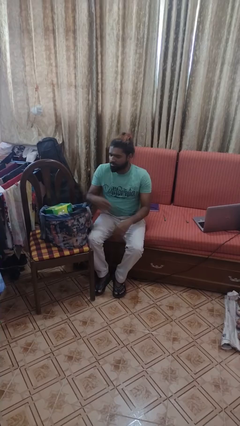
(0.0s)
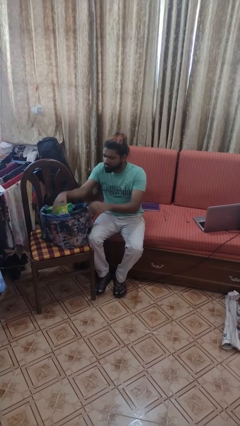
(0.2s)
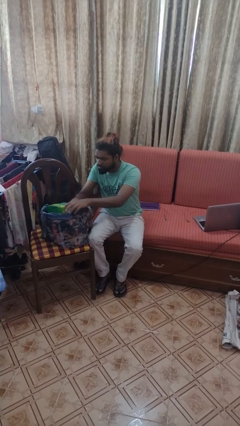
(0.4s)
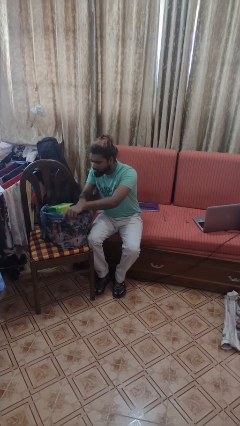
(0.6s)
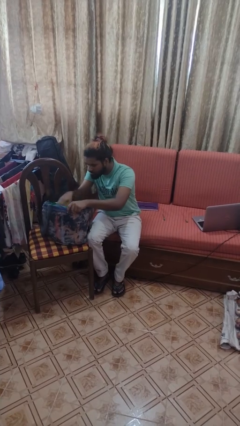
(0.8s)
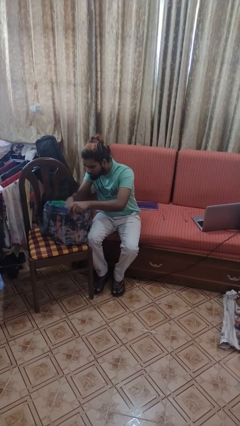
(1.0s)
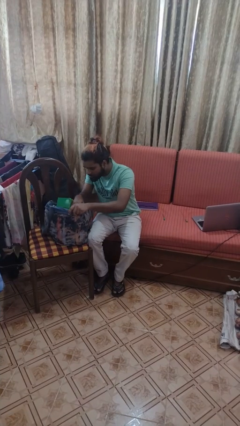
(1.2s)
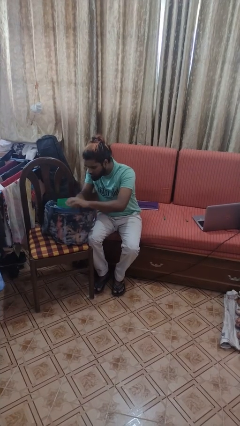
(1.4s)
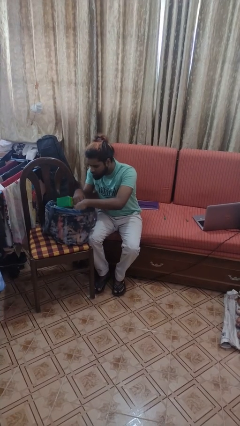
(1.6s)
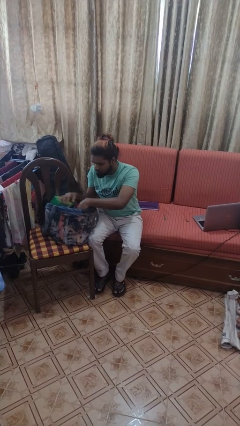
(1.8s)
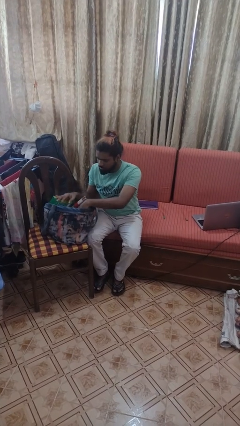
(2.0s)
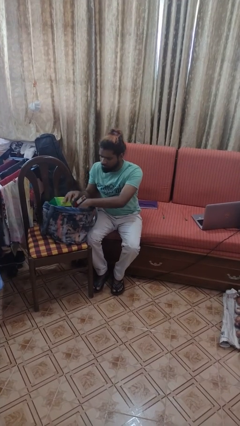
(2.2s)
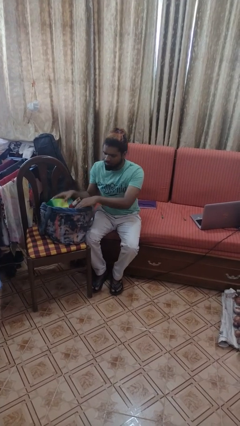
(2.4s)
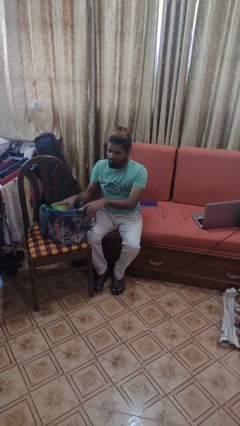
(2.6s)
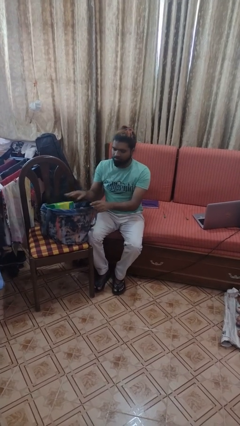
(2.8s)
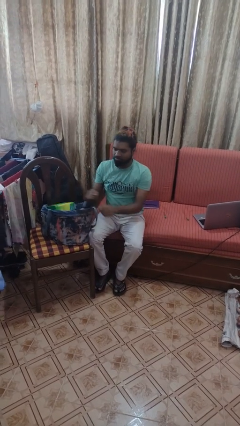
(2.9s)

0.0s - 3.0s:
person searches in bag

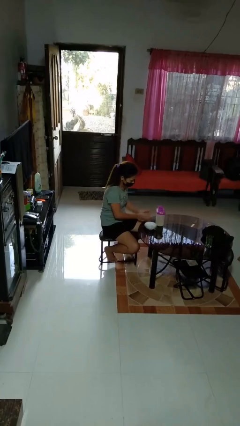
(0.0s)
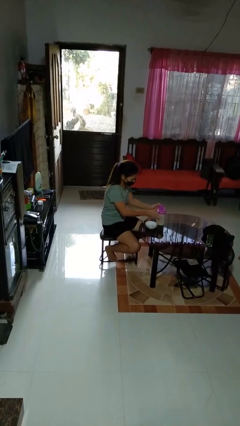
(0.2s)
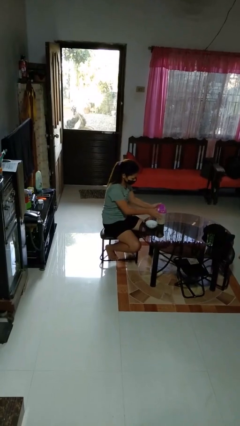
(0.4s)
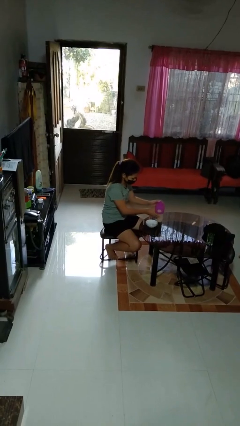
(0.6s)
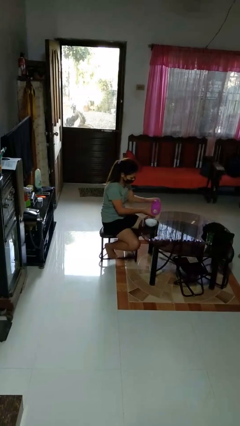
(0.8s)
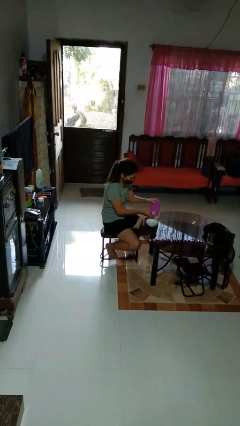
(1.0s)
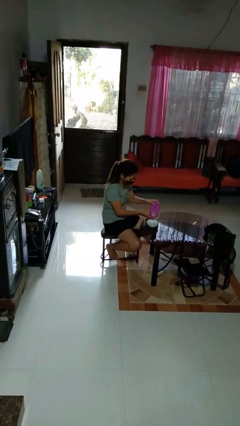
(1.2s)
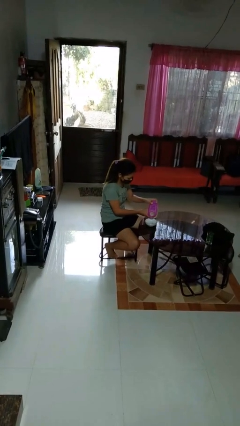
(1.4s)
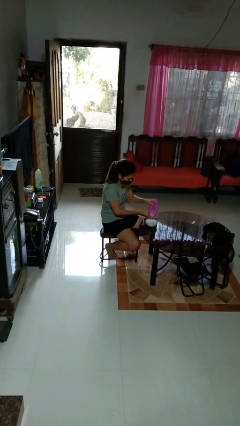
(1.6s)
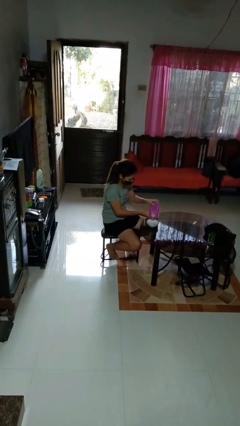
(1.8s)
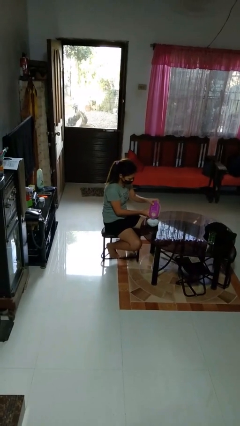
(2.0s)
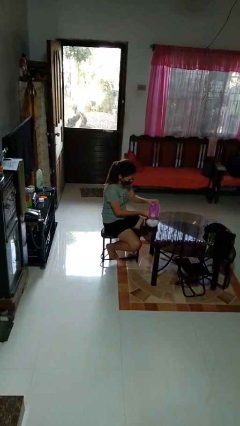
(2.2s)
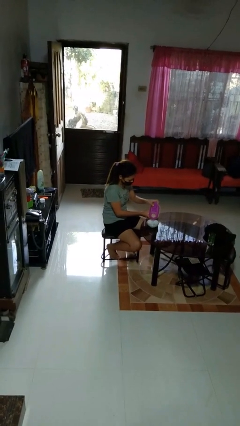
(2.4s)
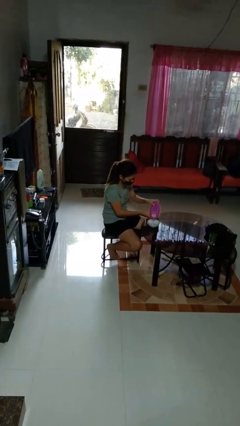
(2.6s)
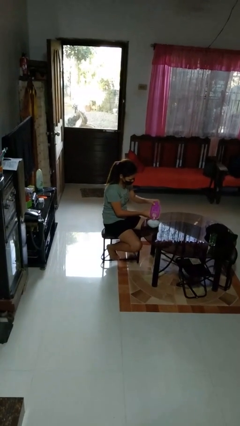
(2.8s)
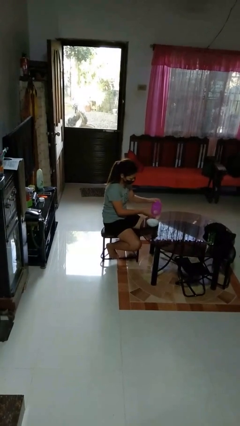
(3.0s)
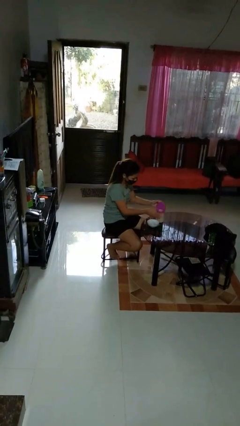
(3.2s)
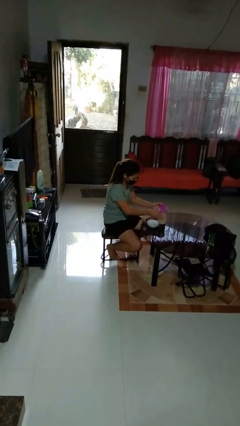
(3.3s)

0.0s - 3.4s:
person pours into bowl

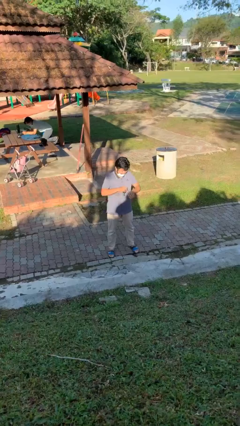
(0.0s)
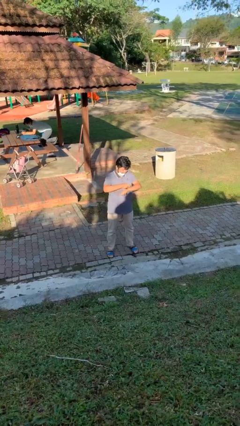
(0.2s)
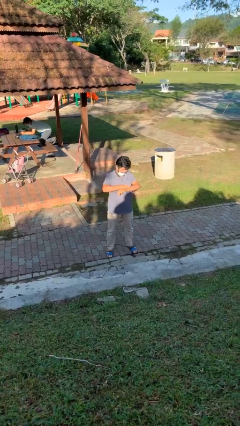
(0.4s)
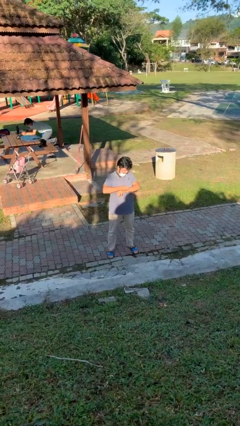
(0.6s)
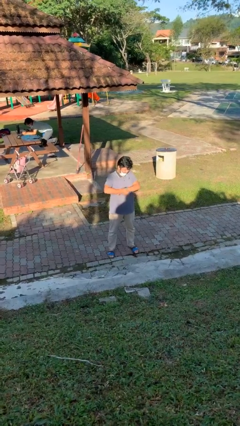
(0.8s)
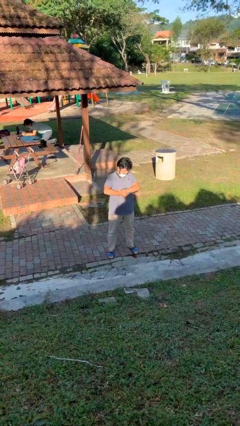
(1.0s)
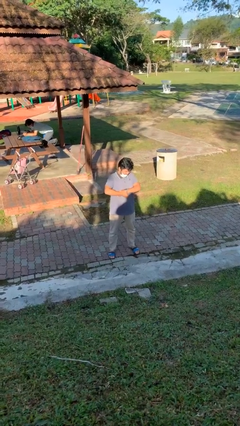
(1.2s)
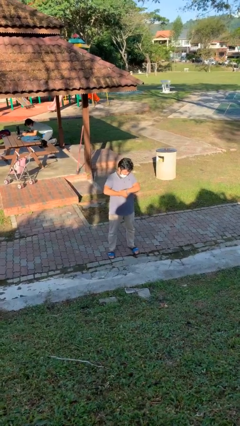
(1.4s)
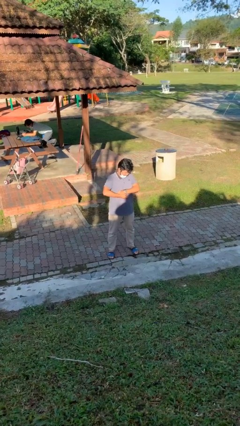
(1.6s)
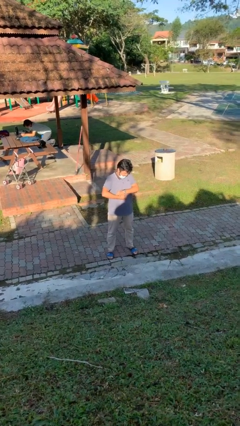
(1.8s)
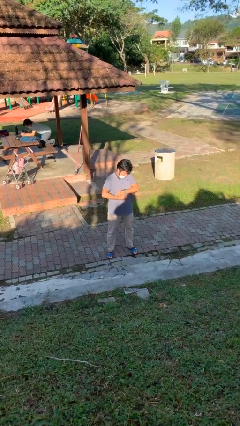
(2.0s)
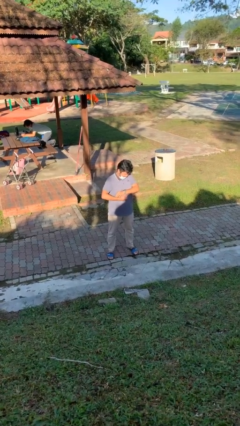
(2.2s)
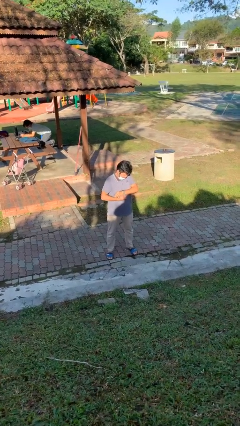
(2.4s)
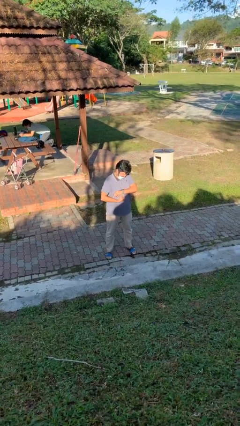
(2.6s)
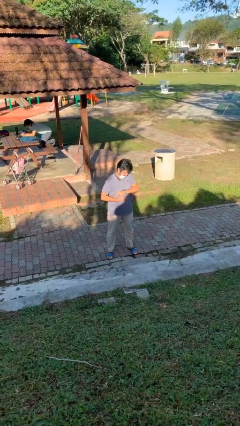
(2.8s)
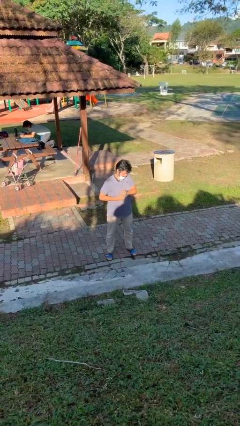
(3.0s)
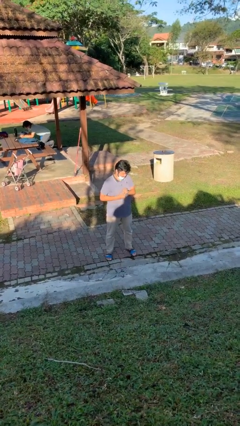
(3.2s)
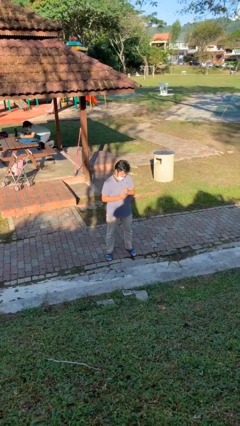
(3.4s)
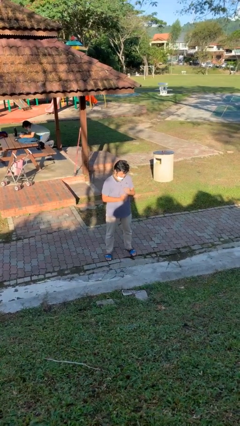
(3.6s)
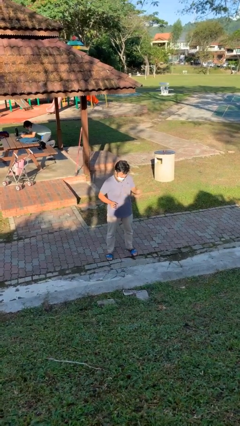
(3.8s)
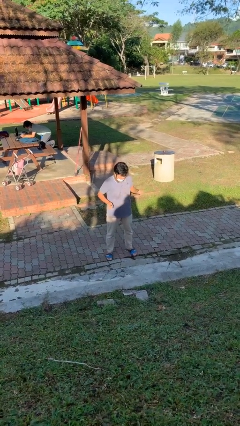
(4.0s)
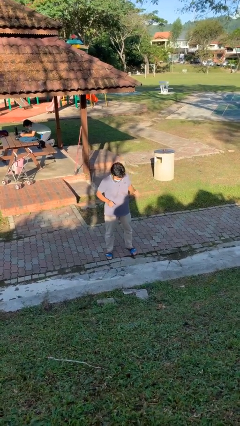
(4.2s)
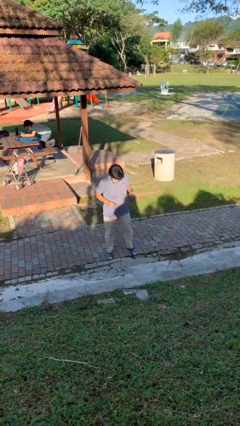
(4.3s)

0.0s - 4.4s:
person puts on wristwatch

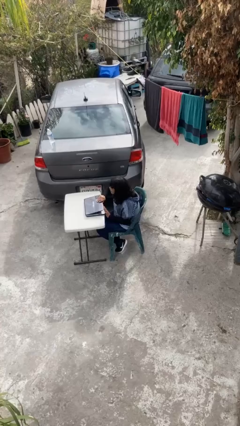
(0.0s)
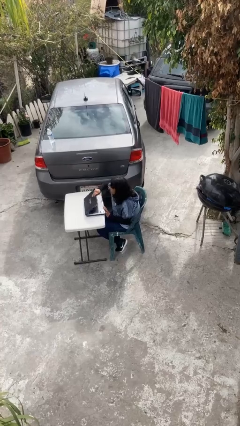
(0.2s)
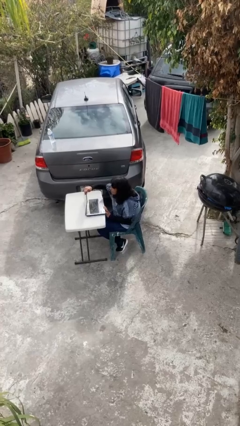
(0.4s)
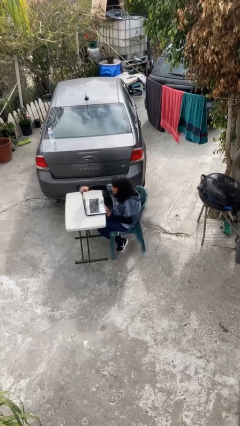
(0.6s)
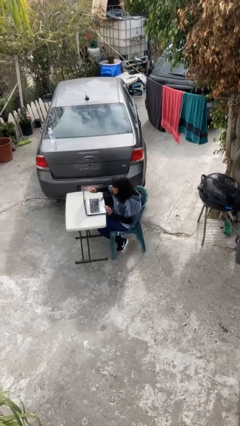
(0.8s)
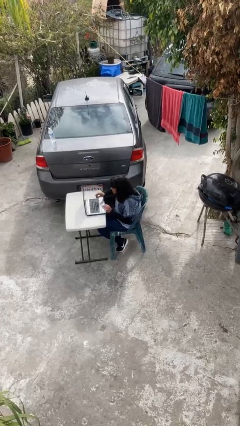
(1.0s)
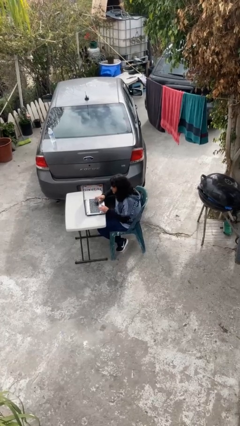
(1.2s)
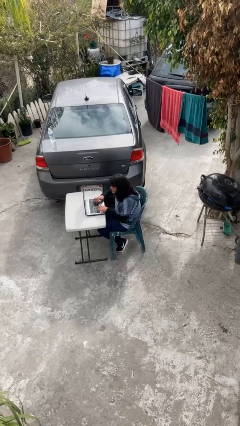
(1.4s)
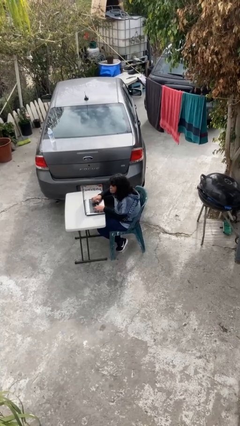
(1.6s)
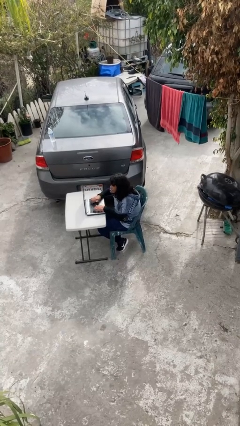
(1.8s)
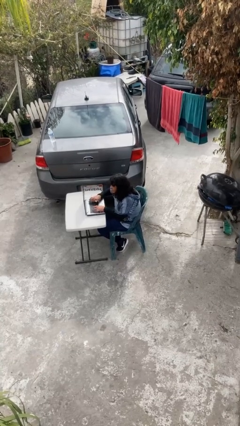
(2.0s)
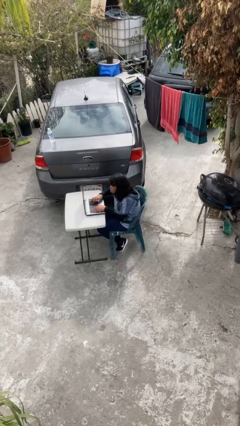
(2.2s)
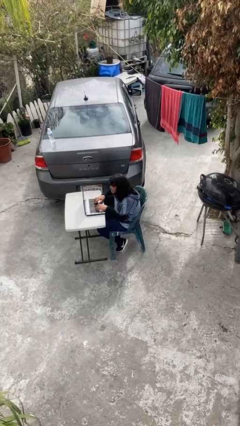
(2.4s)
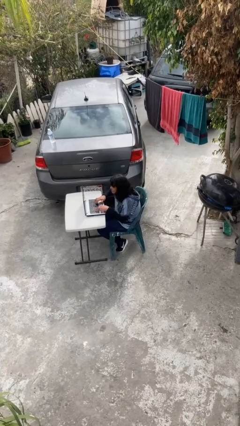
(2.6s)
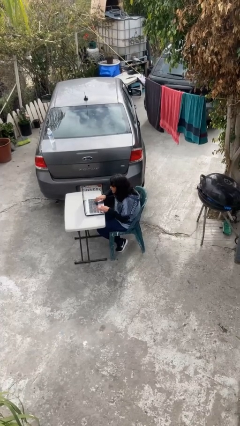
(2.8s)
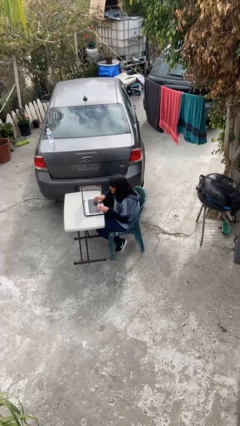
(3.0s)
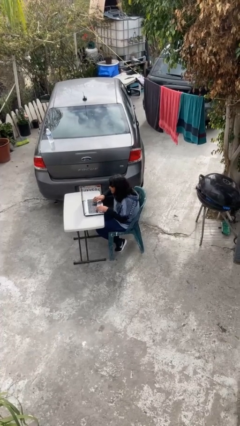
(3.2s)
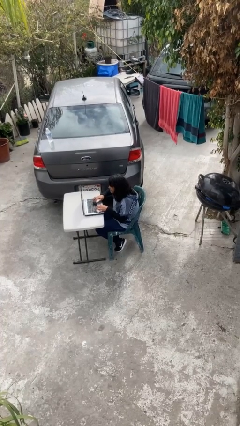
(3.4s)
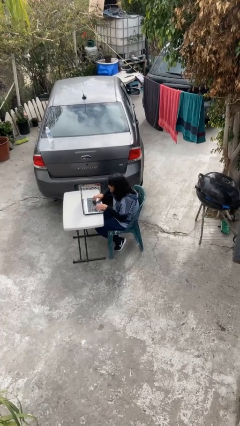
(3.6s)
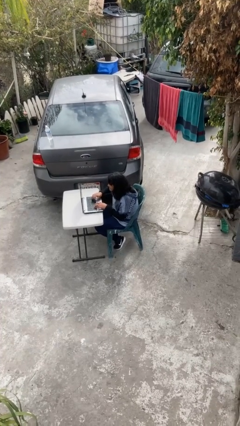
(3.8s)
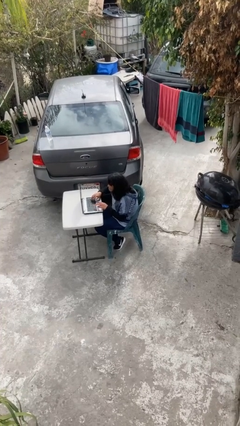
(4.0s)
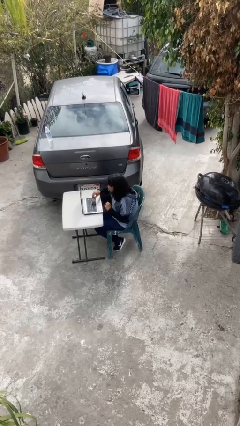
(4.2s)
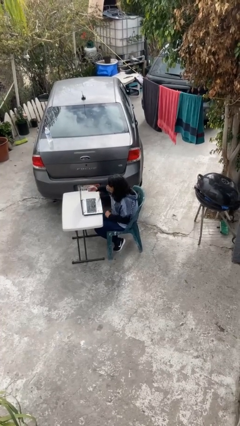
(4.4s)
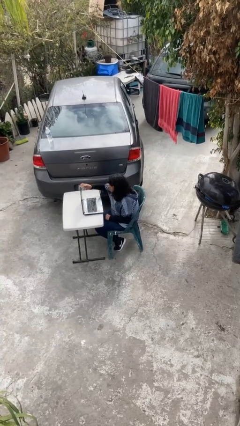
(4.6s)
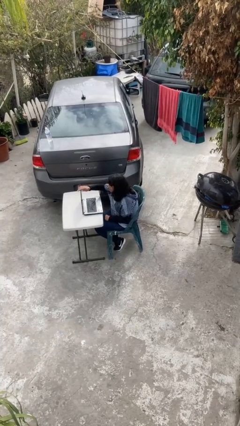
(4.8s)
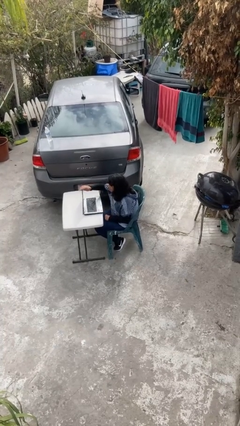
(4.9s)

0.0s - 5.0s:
person interacts with laptop

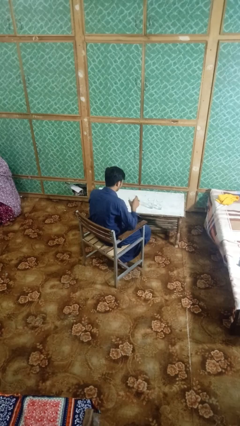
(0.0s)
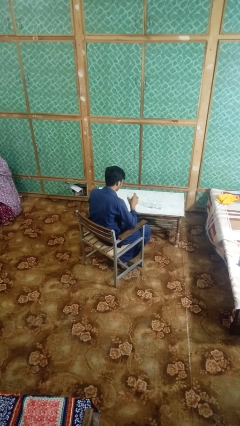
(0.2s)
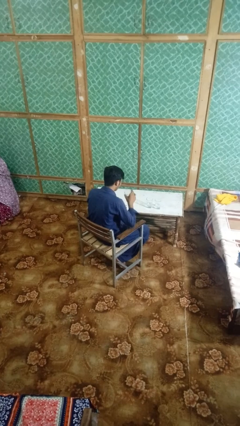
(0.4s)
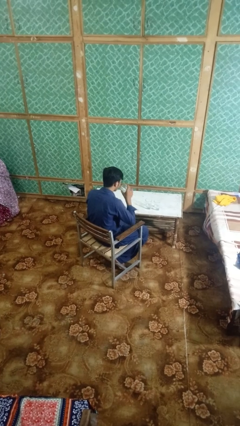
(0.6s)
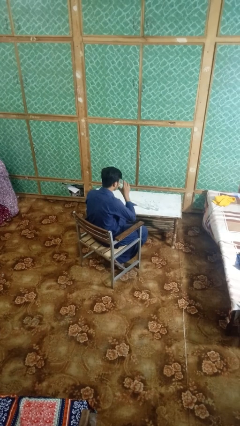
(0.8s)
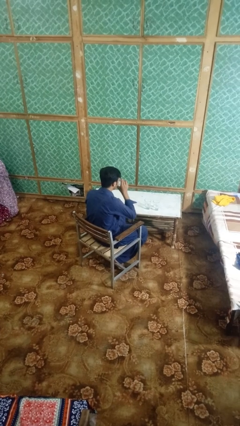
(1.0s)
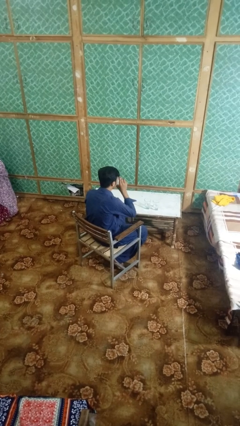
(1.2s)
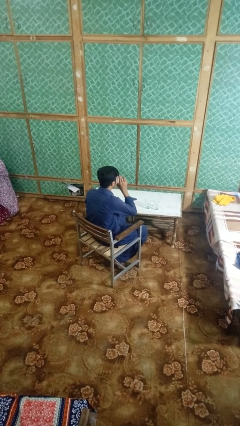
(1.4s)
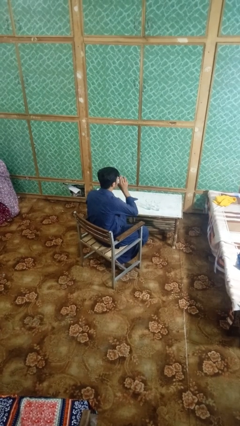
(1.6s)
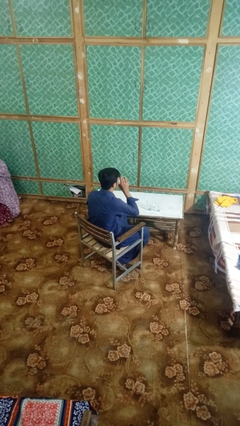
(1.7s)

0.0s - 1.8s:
person drinks from shotglass
